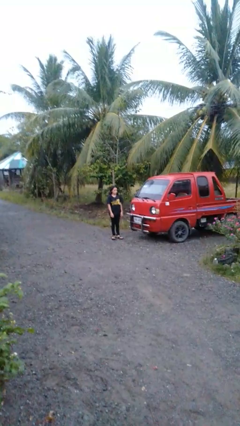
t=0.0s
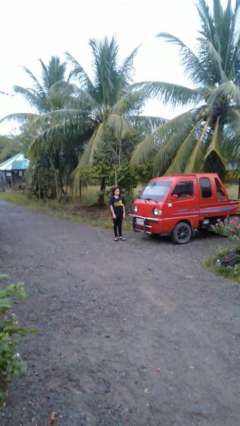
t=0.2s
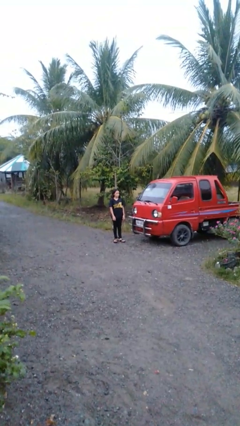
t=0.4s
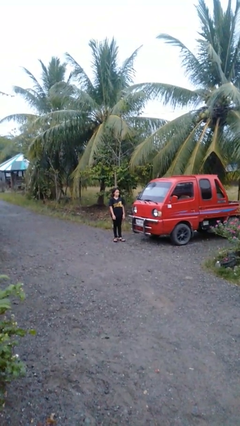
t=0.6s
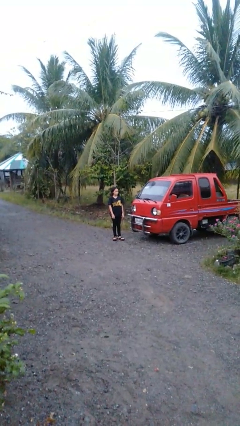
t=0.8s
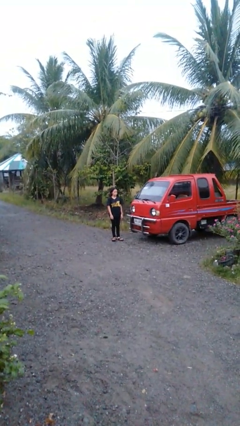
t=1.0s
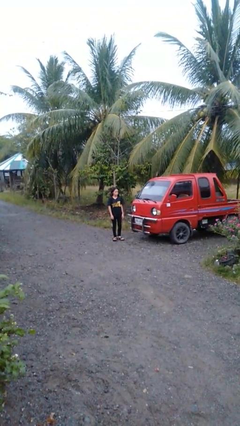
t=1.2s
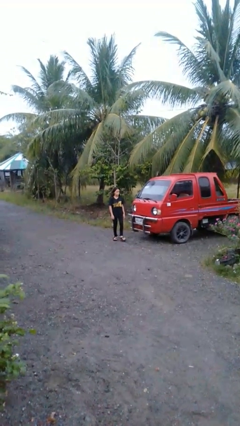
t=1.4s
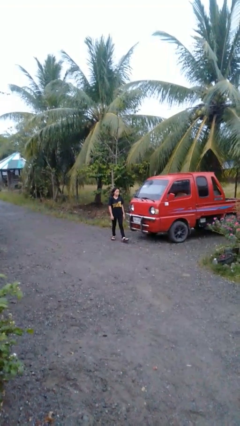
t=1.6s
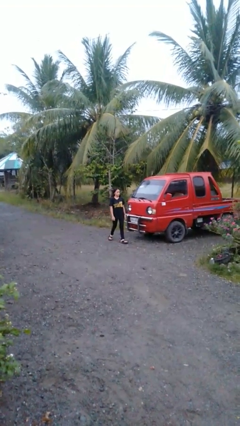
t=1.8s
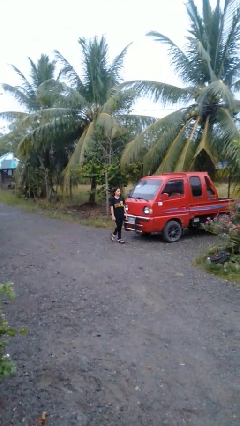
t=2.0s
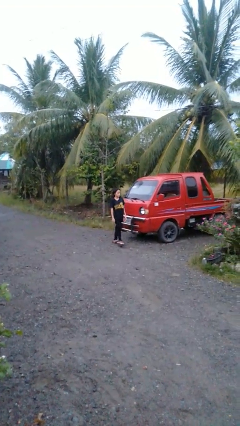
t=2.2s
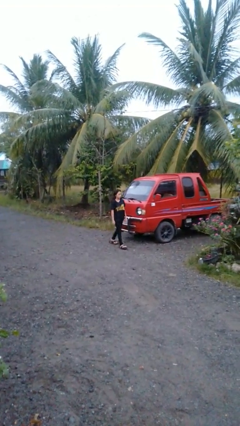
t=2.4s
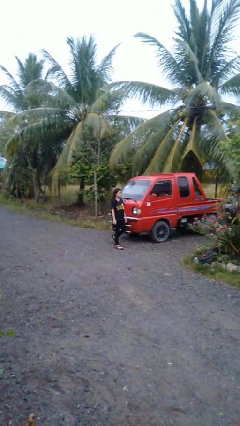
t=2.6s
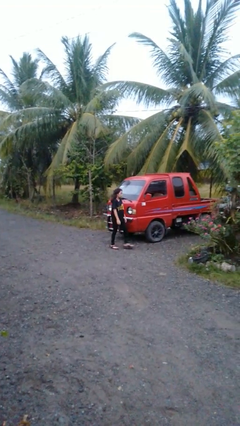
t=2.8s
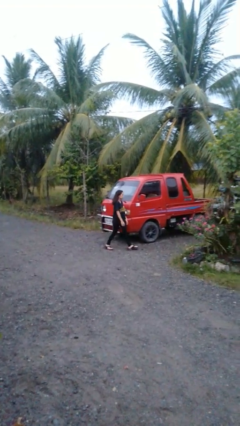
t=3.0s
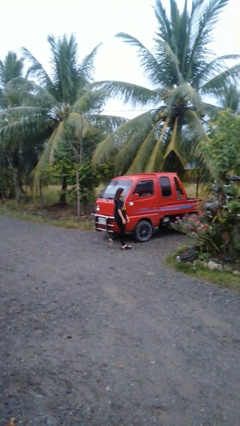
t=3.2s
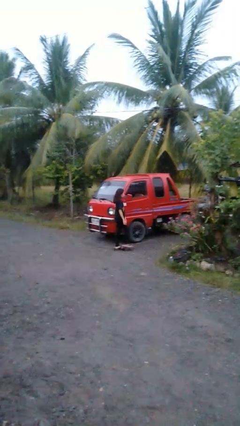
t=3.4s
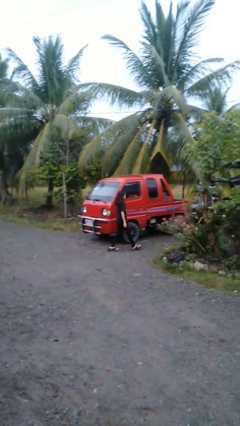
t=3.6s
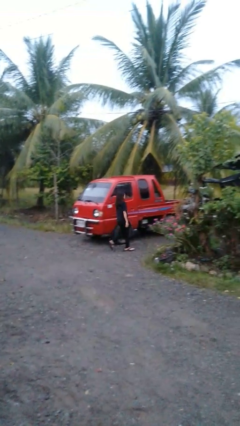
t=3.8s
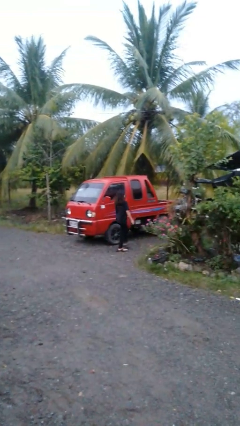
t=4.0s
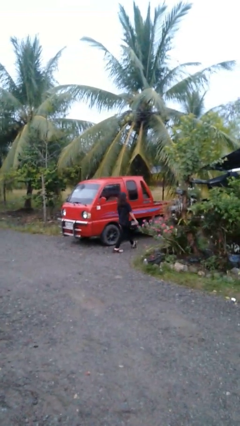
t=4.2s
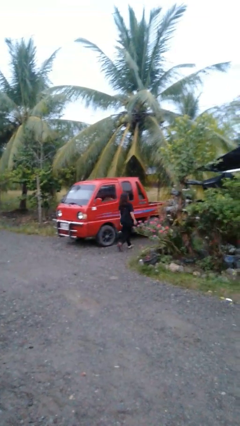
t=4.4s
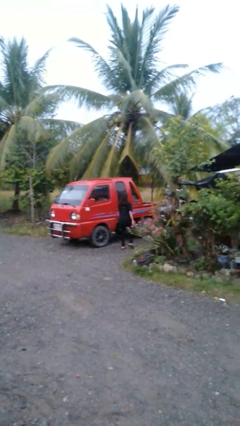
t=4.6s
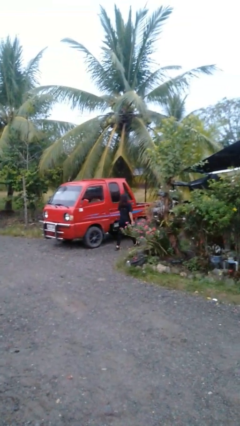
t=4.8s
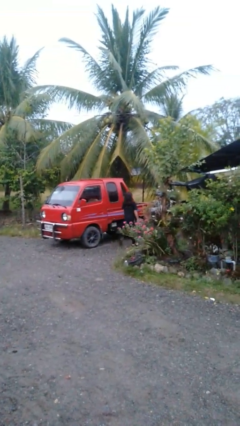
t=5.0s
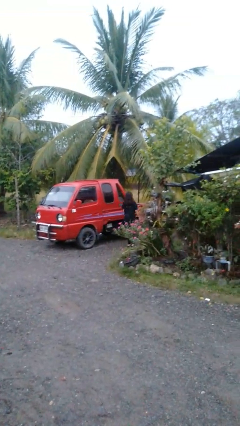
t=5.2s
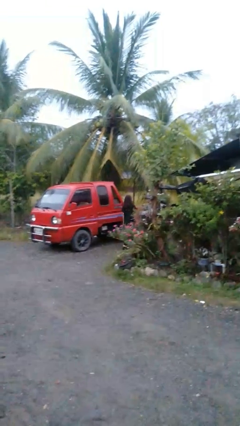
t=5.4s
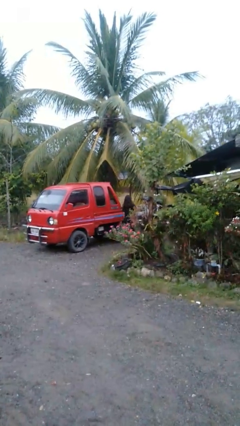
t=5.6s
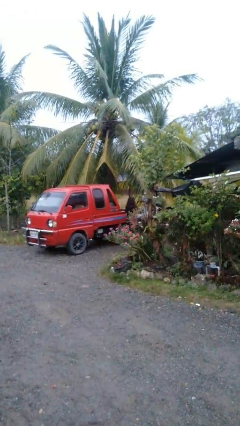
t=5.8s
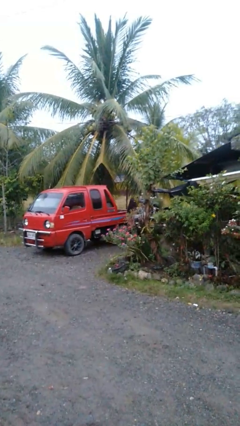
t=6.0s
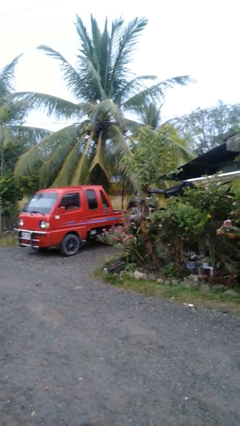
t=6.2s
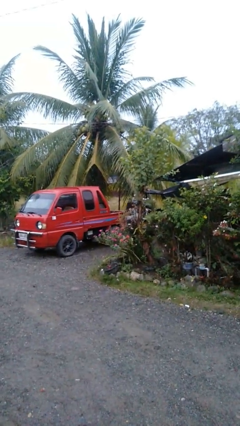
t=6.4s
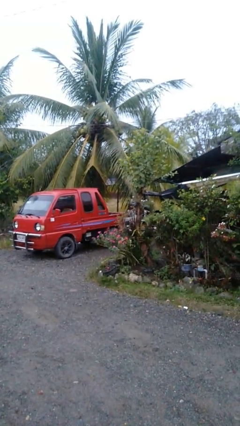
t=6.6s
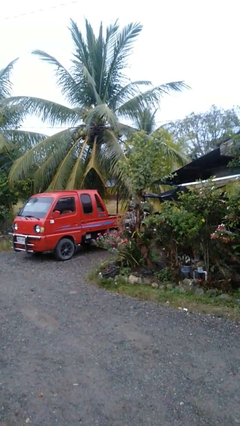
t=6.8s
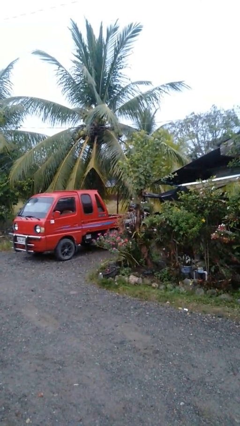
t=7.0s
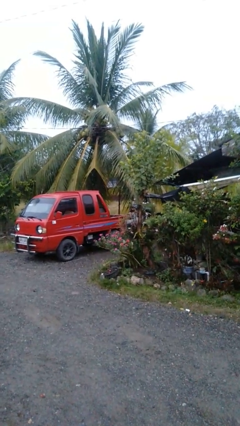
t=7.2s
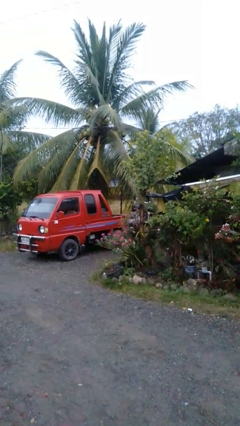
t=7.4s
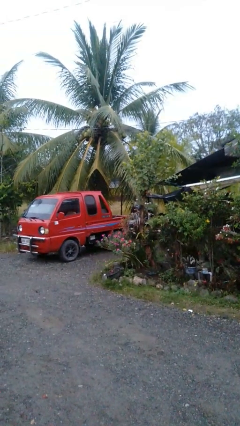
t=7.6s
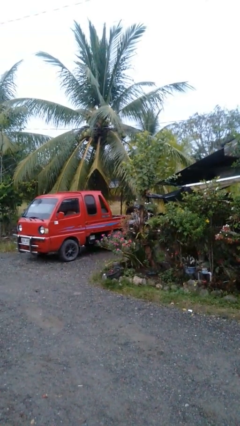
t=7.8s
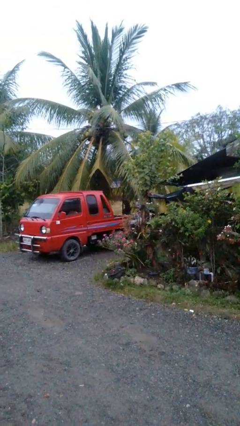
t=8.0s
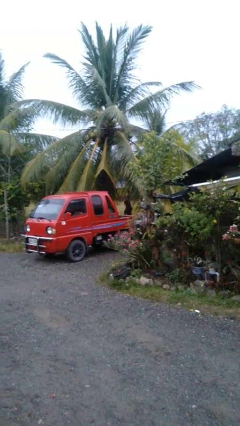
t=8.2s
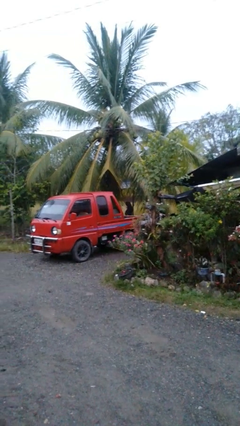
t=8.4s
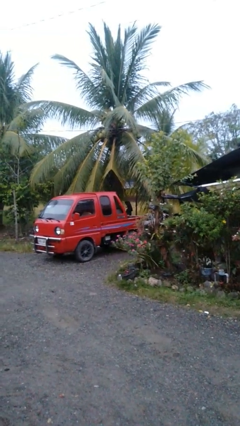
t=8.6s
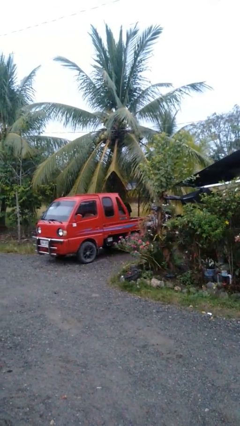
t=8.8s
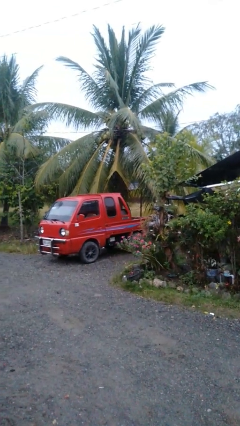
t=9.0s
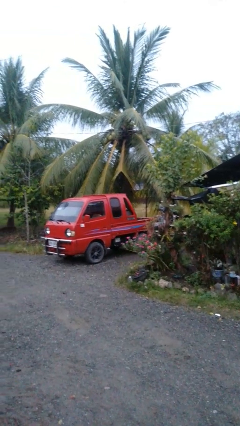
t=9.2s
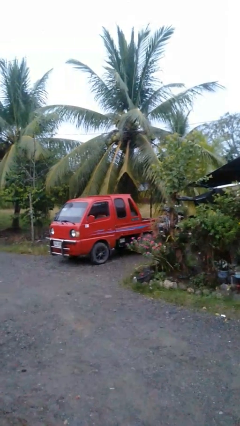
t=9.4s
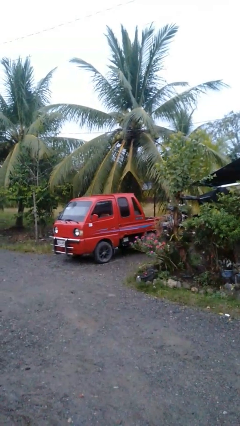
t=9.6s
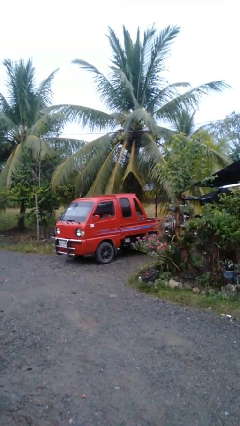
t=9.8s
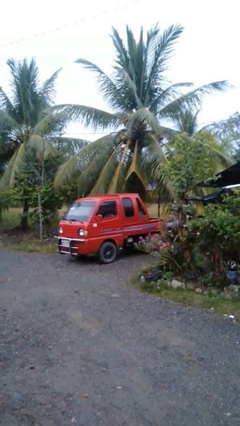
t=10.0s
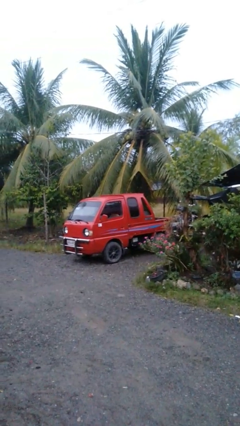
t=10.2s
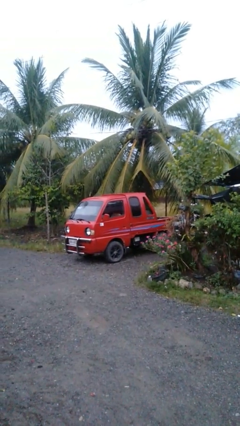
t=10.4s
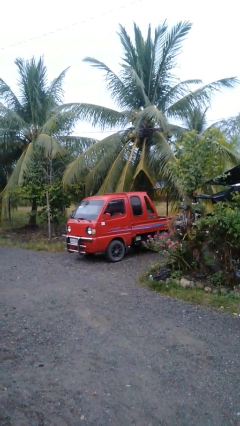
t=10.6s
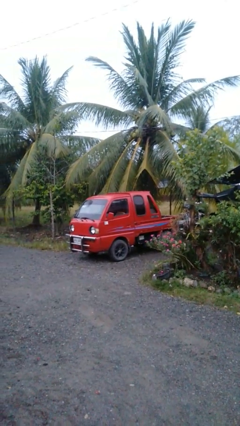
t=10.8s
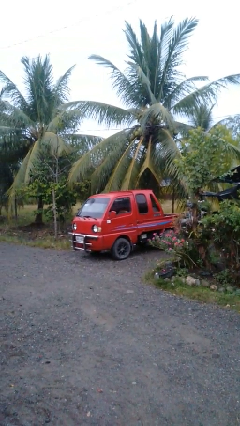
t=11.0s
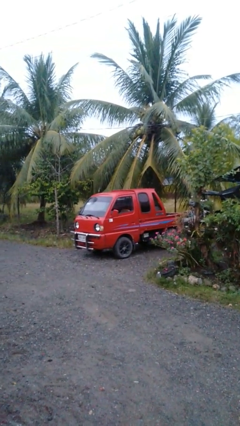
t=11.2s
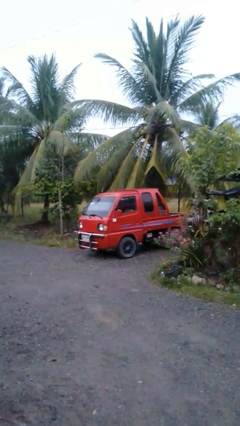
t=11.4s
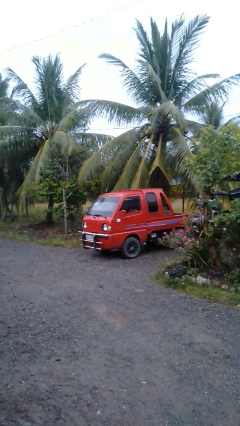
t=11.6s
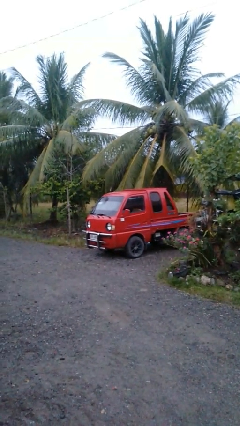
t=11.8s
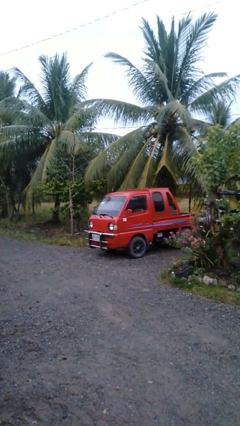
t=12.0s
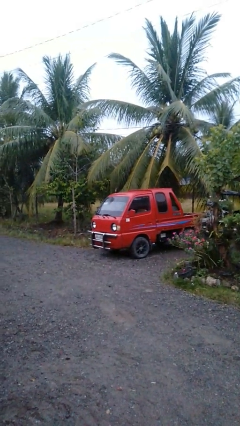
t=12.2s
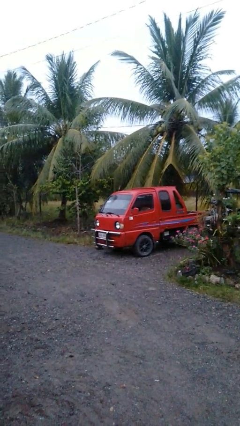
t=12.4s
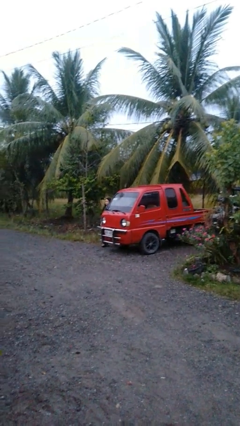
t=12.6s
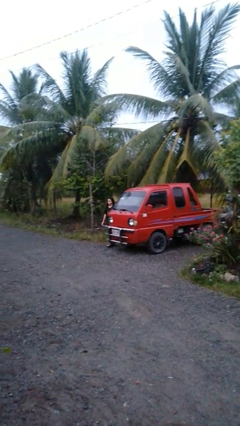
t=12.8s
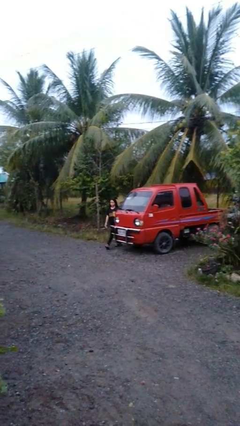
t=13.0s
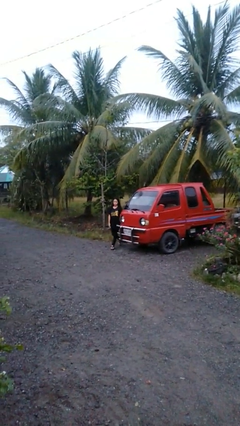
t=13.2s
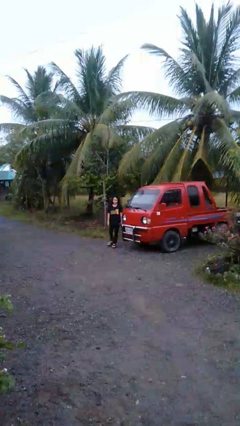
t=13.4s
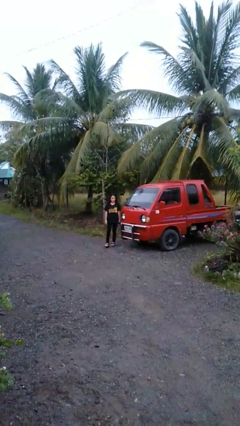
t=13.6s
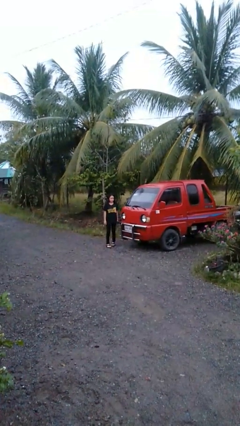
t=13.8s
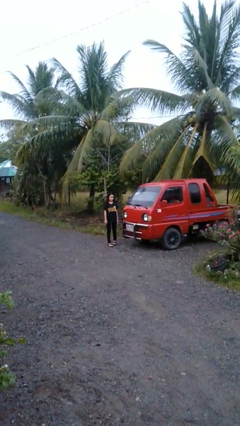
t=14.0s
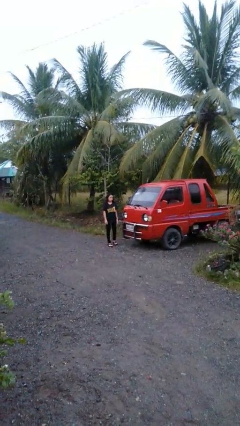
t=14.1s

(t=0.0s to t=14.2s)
person walks around car

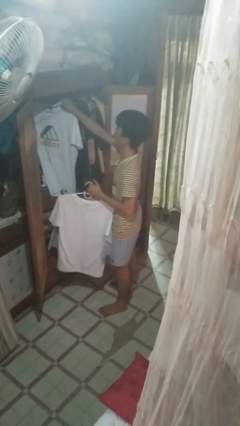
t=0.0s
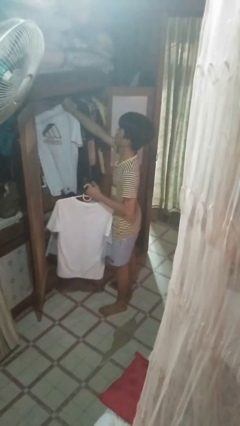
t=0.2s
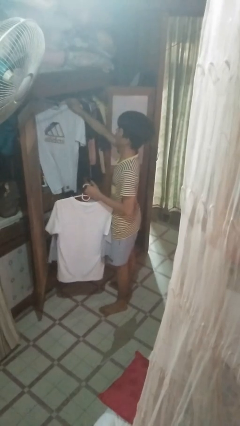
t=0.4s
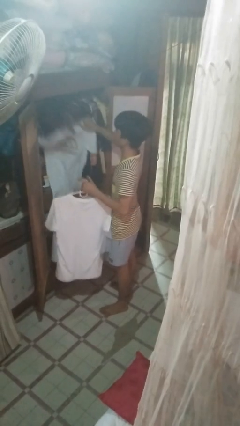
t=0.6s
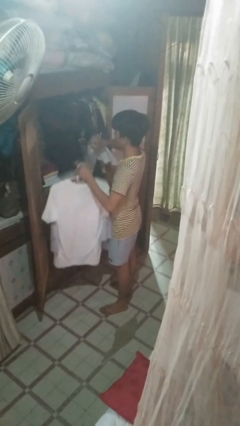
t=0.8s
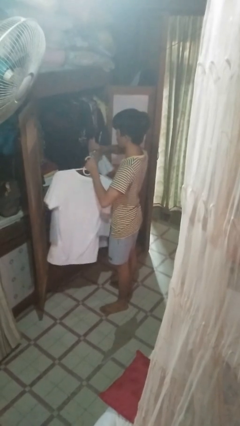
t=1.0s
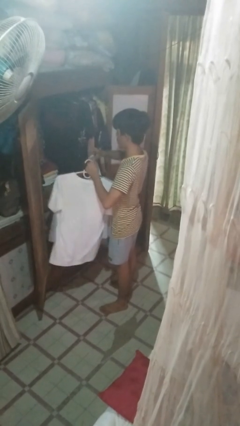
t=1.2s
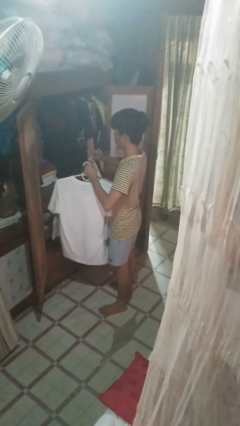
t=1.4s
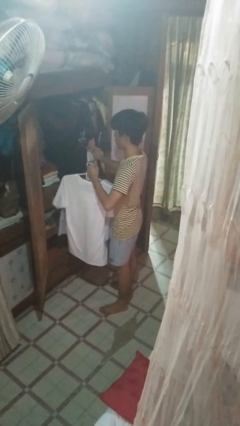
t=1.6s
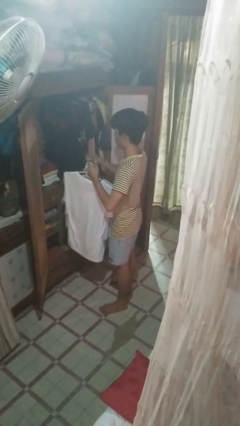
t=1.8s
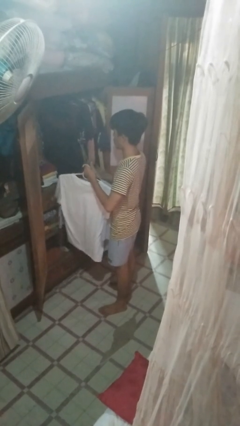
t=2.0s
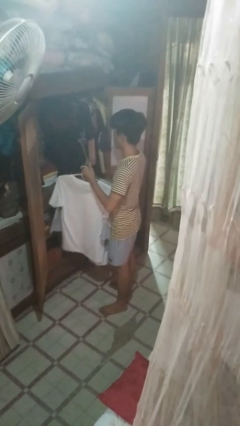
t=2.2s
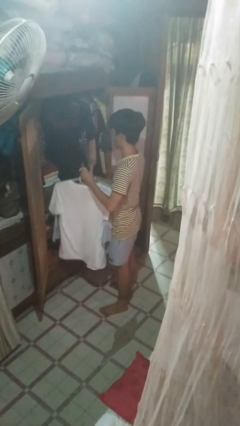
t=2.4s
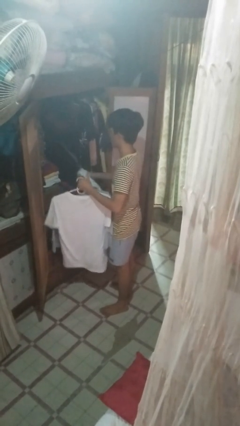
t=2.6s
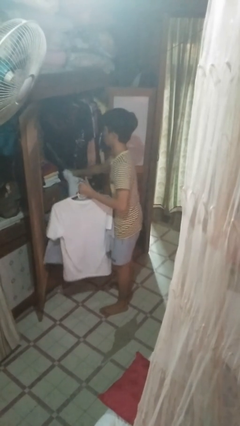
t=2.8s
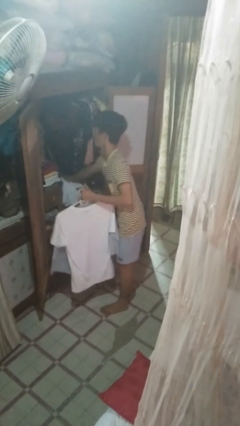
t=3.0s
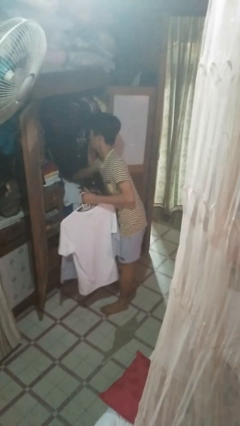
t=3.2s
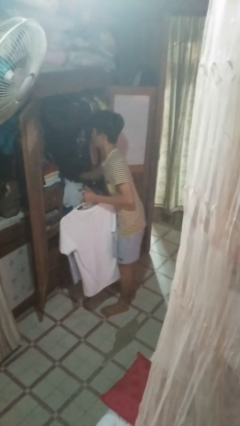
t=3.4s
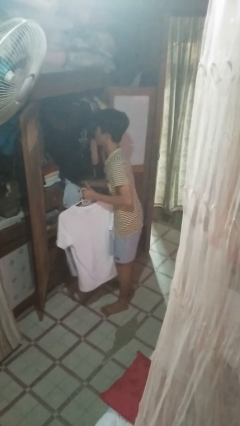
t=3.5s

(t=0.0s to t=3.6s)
person takes clothes from closet

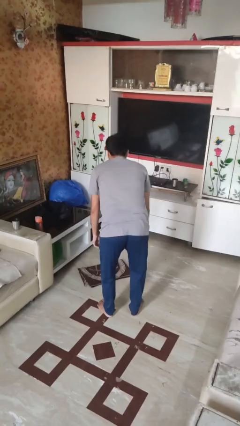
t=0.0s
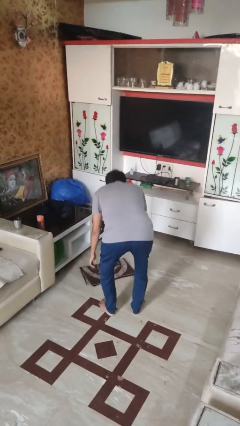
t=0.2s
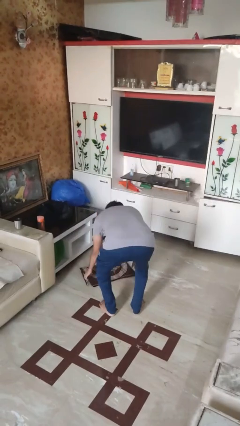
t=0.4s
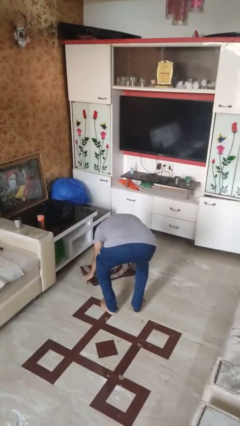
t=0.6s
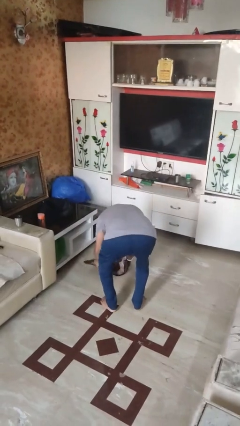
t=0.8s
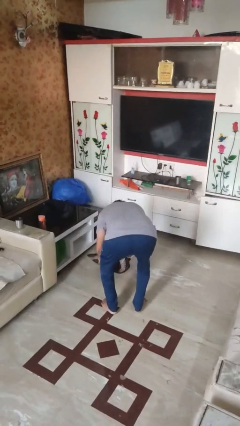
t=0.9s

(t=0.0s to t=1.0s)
person picks up object from floor
